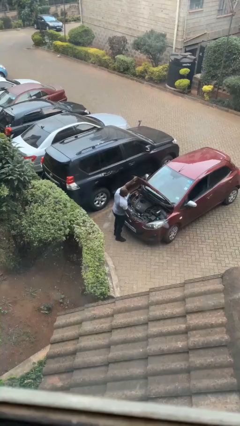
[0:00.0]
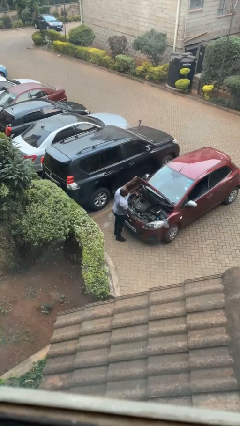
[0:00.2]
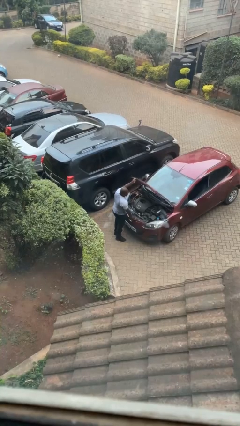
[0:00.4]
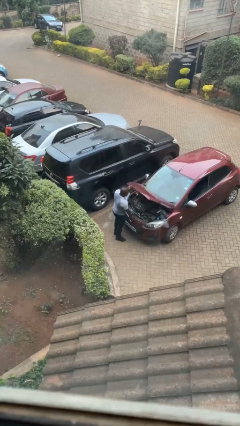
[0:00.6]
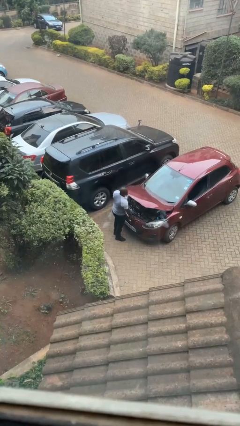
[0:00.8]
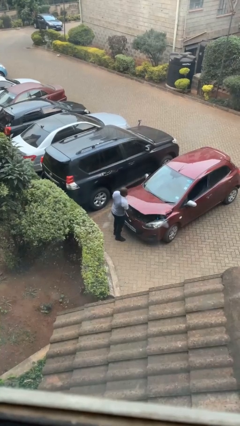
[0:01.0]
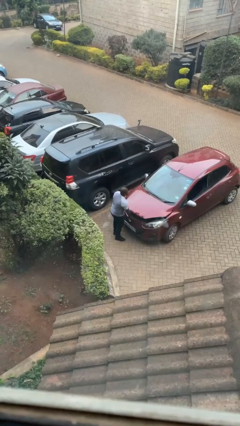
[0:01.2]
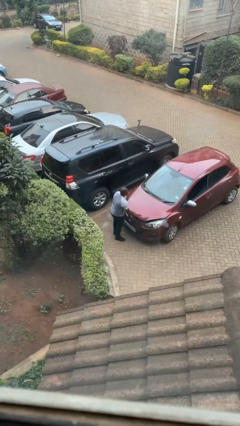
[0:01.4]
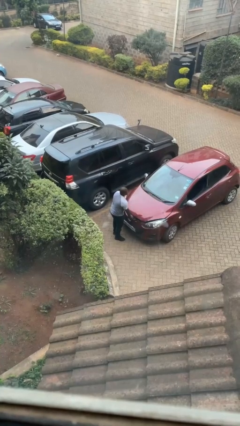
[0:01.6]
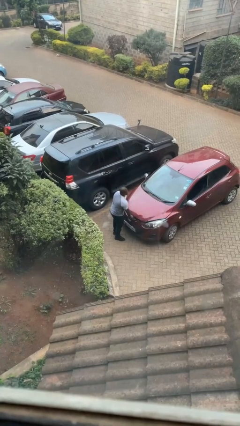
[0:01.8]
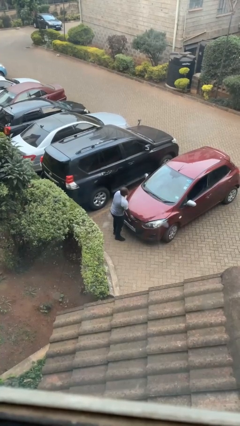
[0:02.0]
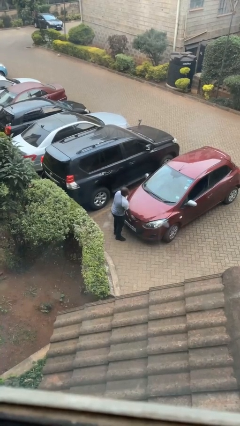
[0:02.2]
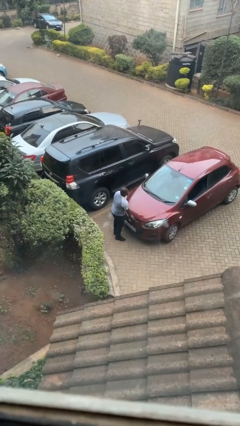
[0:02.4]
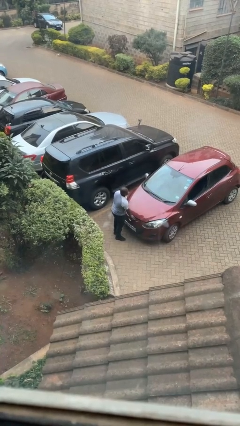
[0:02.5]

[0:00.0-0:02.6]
person closes car hood

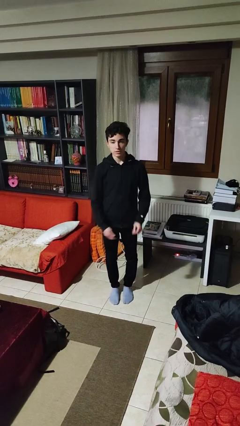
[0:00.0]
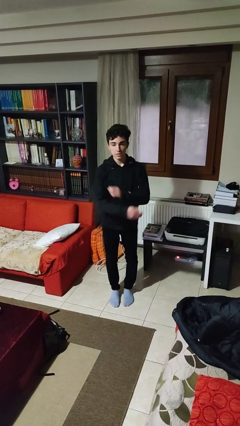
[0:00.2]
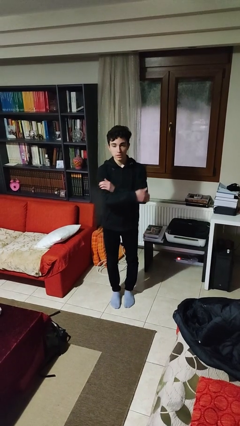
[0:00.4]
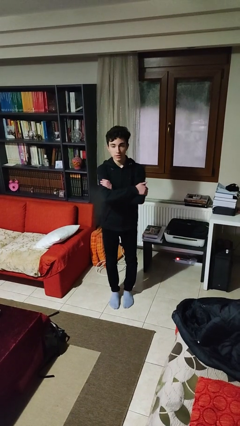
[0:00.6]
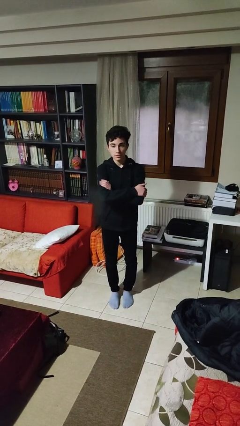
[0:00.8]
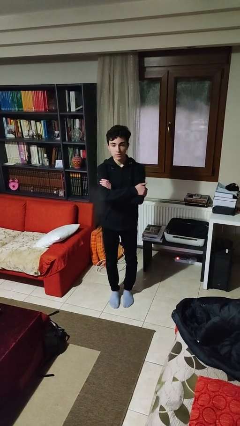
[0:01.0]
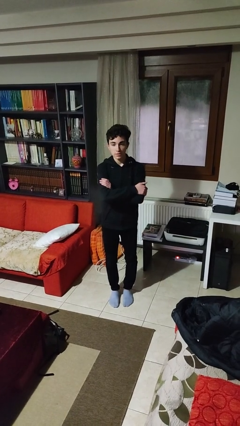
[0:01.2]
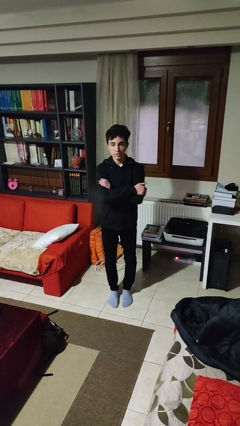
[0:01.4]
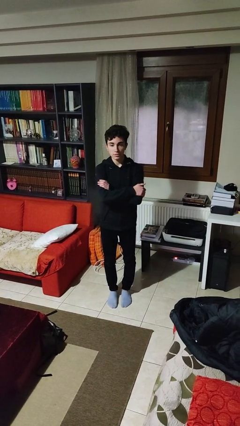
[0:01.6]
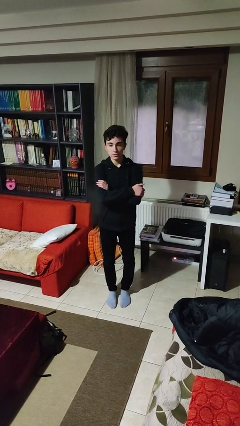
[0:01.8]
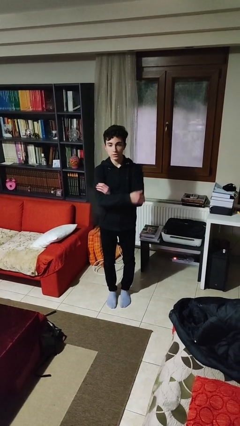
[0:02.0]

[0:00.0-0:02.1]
person crosses arms

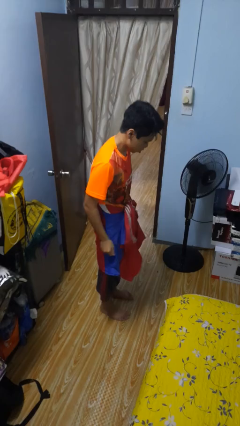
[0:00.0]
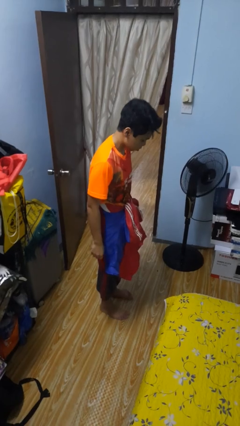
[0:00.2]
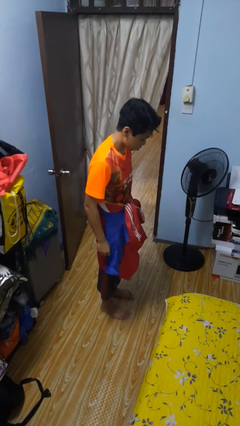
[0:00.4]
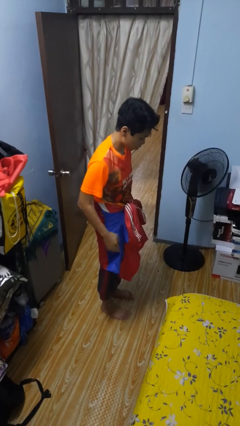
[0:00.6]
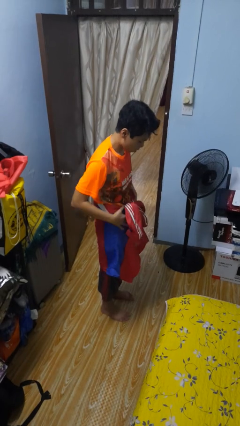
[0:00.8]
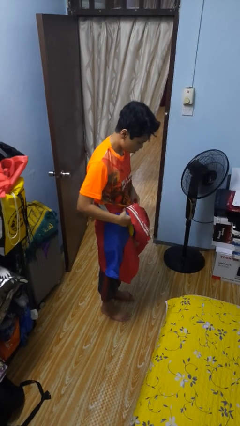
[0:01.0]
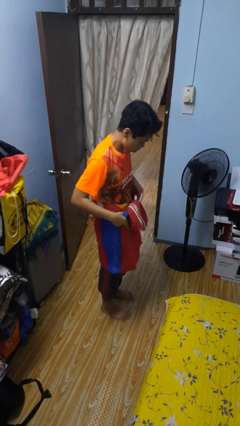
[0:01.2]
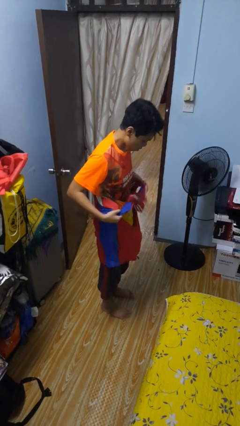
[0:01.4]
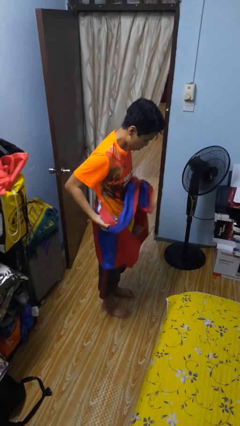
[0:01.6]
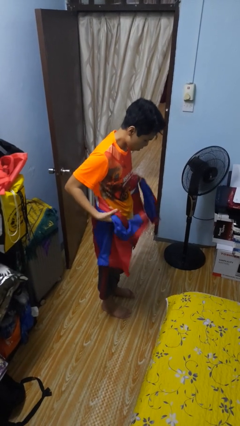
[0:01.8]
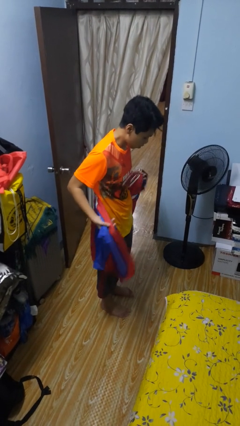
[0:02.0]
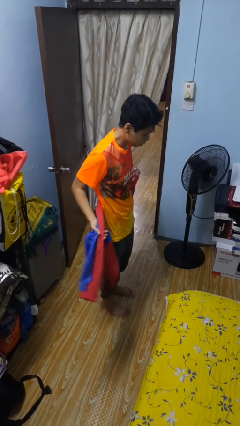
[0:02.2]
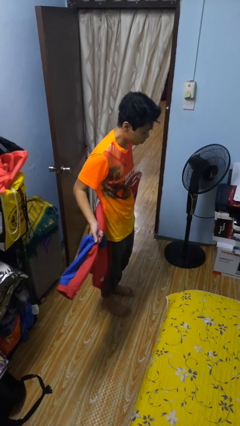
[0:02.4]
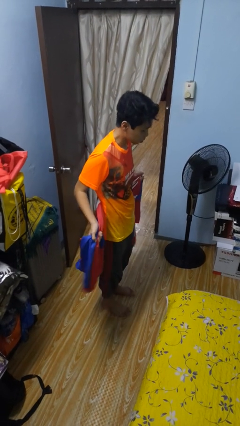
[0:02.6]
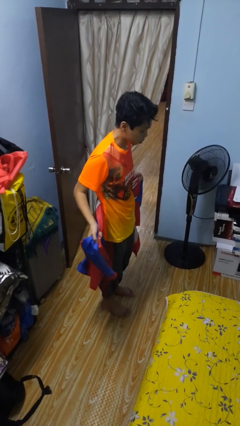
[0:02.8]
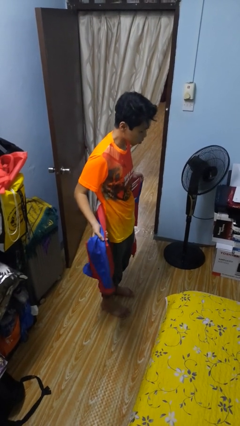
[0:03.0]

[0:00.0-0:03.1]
person unties jacket around waist

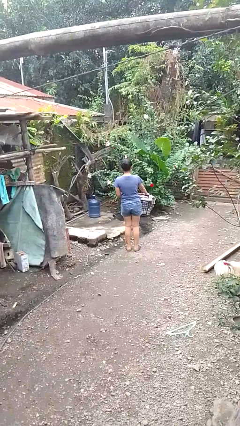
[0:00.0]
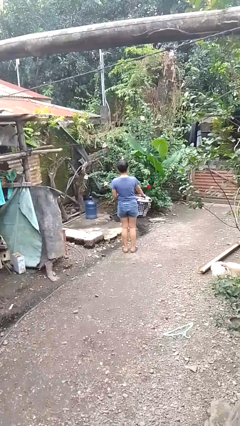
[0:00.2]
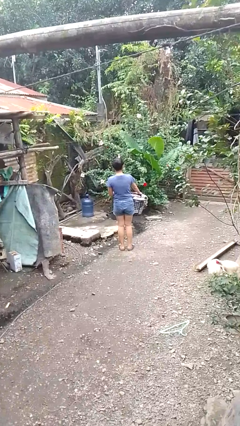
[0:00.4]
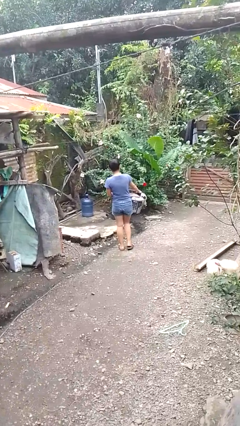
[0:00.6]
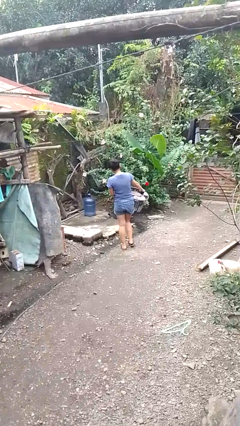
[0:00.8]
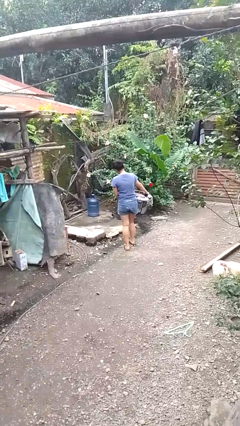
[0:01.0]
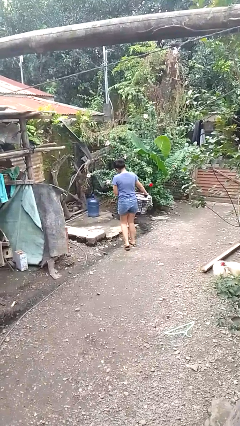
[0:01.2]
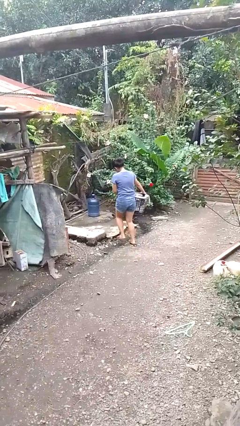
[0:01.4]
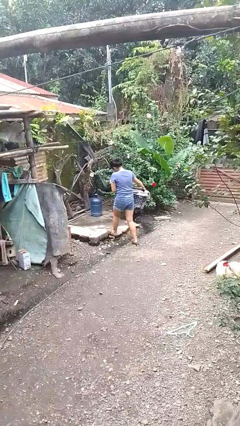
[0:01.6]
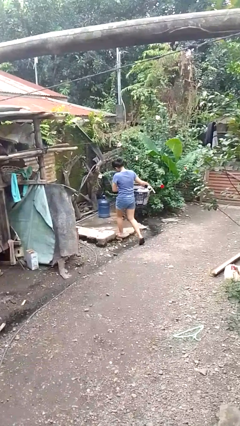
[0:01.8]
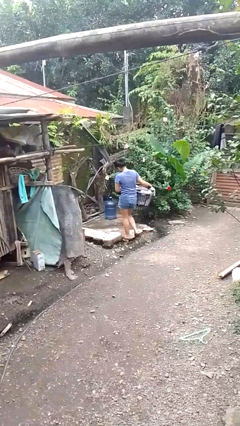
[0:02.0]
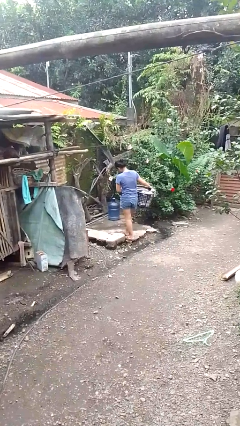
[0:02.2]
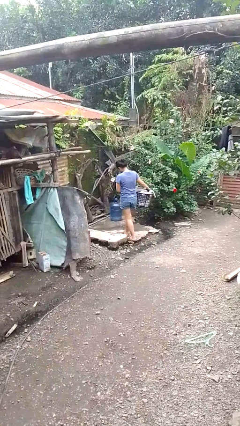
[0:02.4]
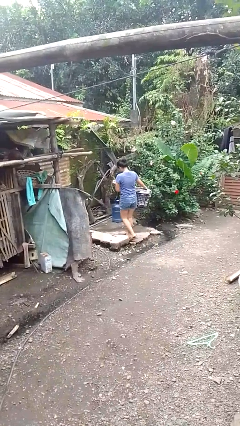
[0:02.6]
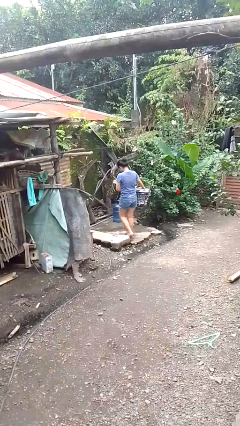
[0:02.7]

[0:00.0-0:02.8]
person carries laundry basket

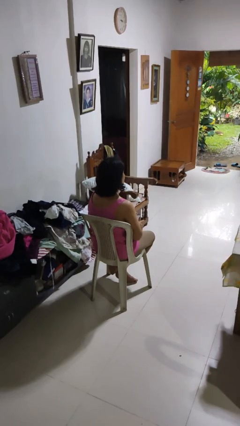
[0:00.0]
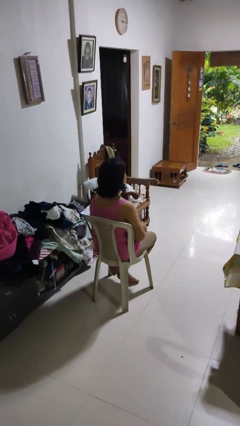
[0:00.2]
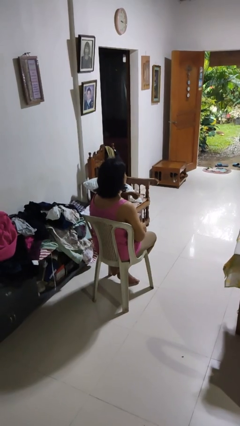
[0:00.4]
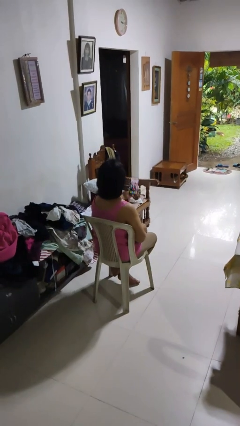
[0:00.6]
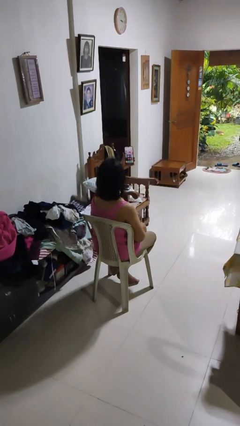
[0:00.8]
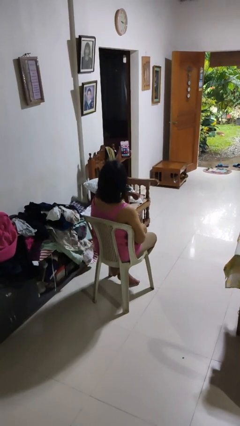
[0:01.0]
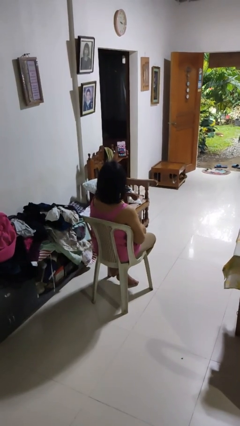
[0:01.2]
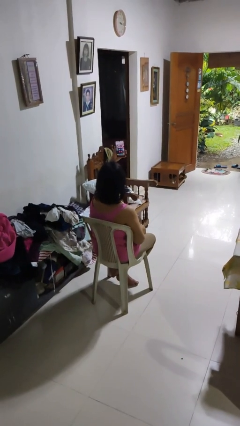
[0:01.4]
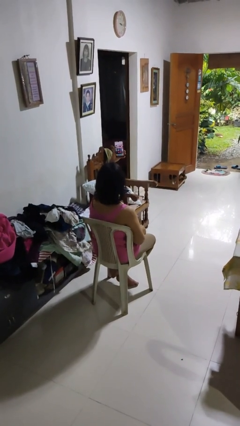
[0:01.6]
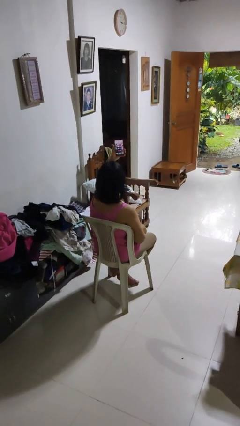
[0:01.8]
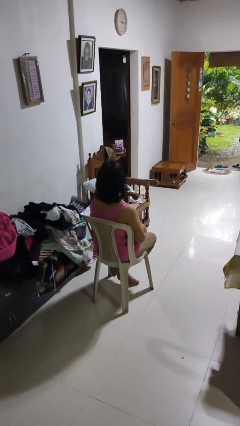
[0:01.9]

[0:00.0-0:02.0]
person takes selfie

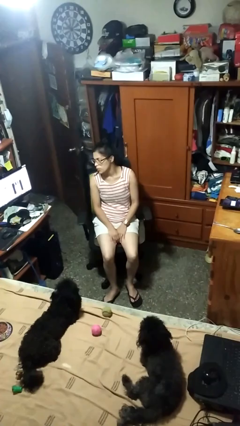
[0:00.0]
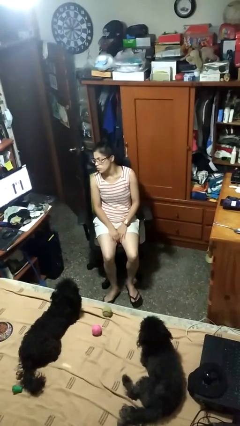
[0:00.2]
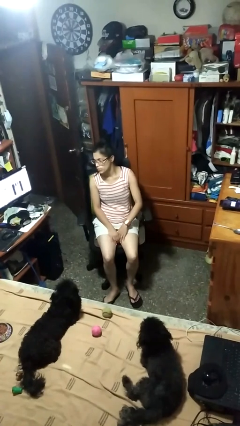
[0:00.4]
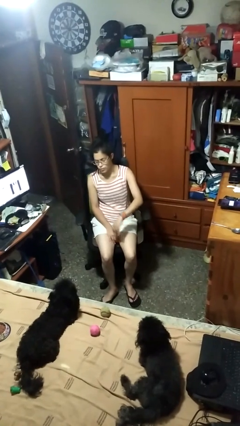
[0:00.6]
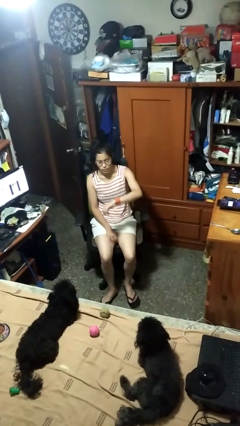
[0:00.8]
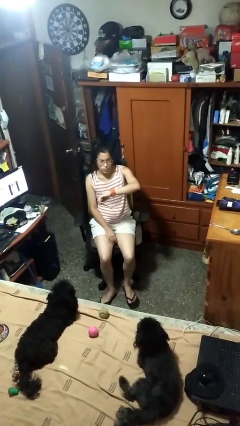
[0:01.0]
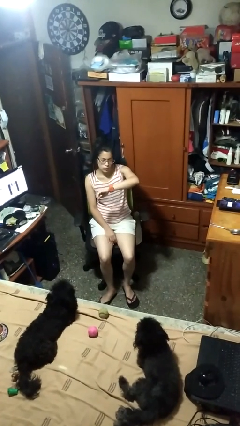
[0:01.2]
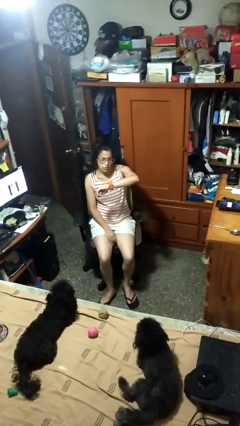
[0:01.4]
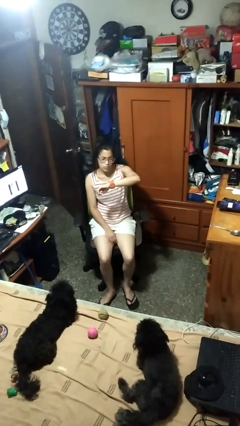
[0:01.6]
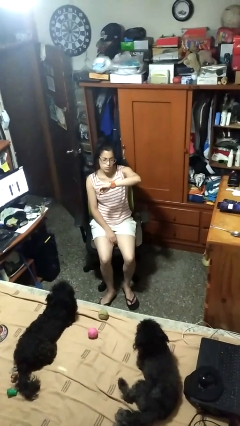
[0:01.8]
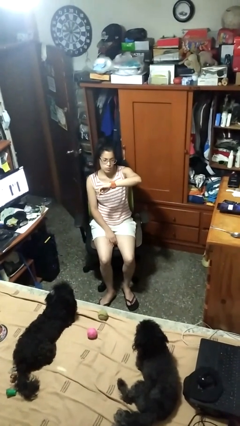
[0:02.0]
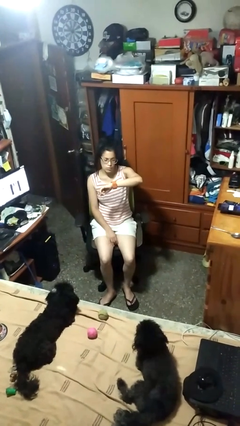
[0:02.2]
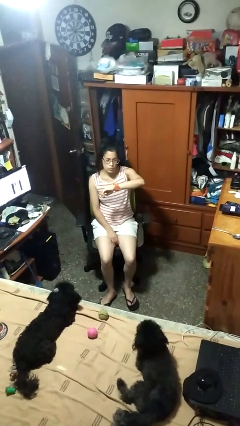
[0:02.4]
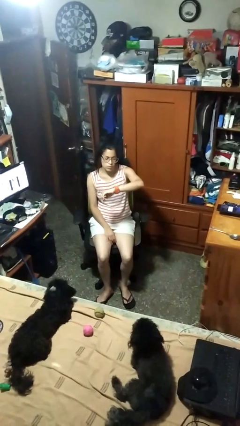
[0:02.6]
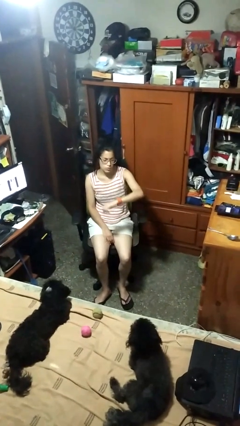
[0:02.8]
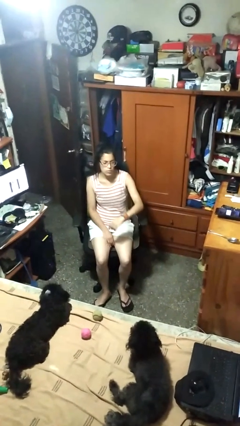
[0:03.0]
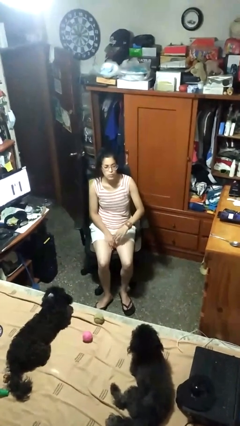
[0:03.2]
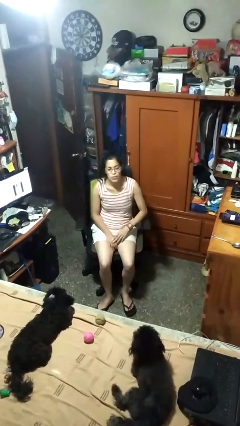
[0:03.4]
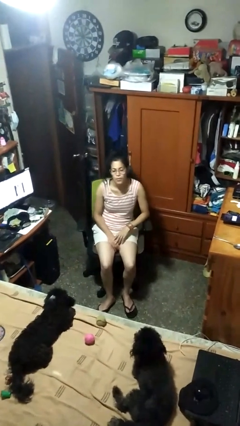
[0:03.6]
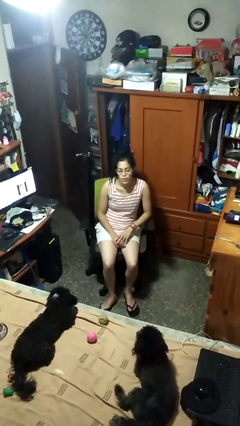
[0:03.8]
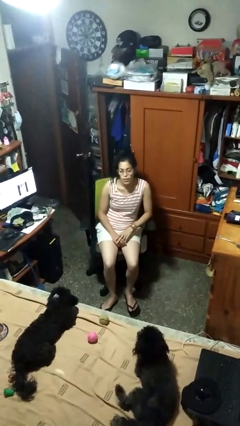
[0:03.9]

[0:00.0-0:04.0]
person looks at wristwatch

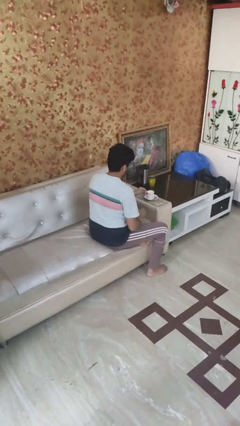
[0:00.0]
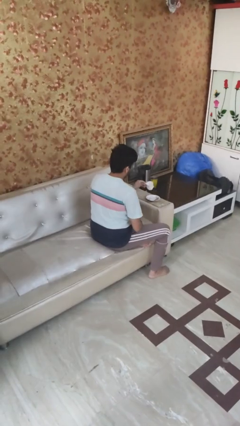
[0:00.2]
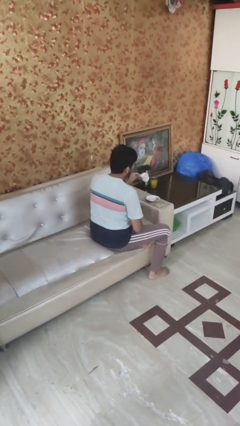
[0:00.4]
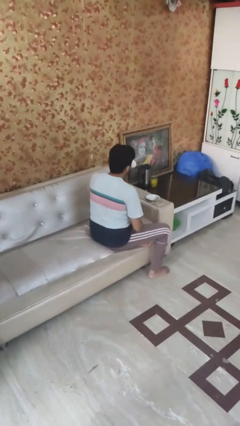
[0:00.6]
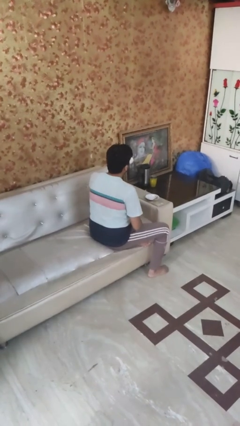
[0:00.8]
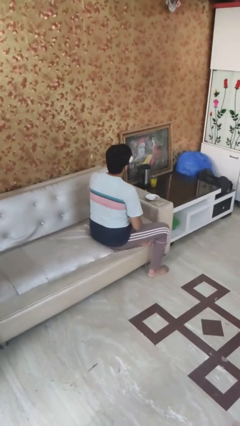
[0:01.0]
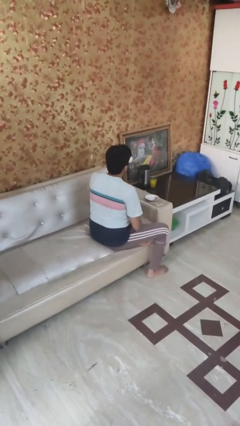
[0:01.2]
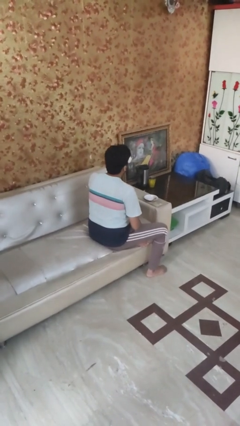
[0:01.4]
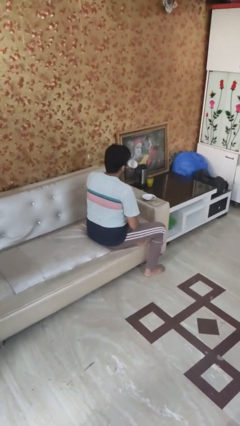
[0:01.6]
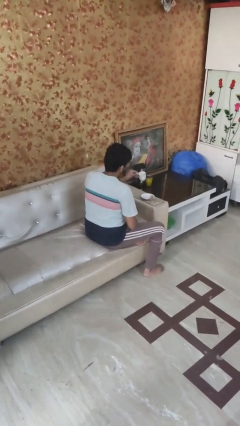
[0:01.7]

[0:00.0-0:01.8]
person drinks from mug
